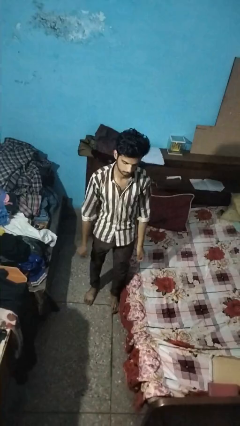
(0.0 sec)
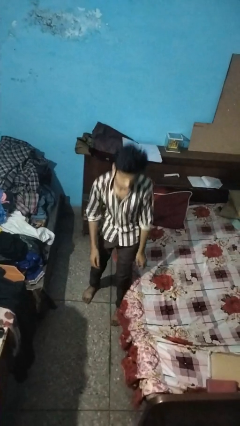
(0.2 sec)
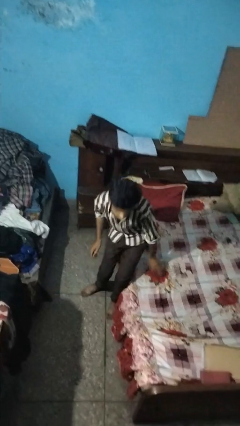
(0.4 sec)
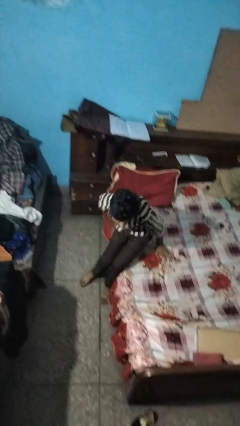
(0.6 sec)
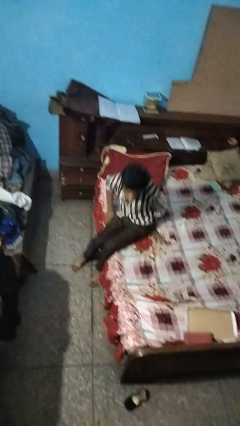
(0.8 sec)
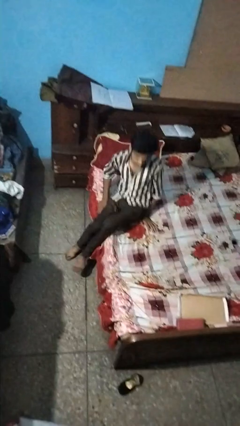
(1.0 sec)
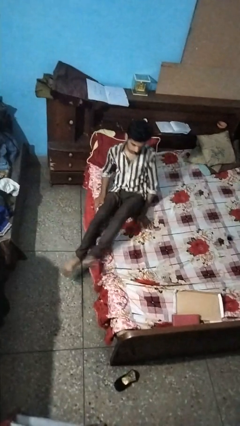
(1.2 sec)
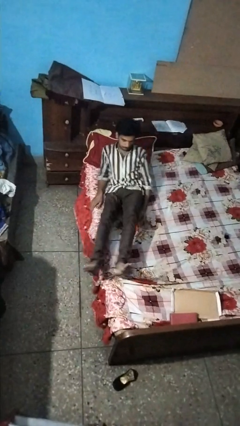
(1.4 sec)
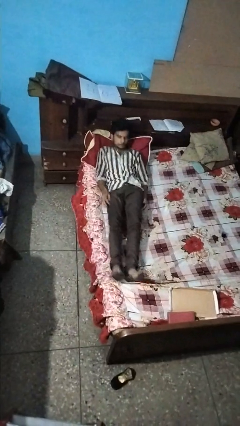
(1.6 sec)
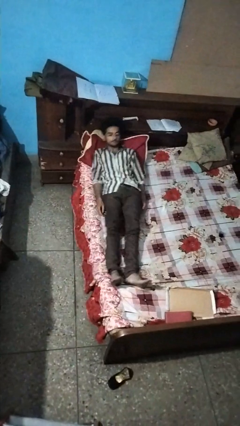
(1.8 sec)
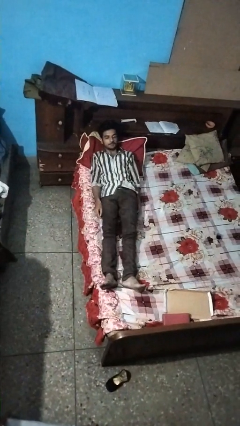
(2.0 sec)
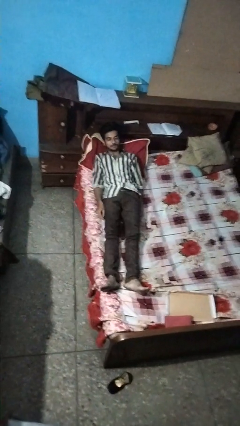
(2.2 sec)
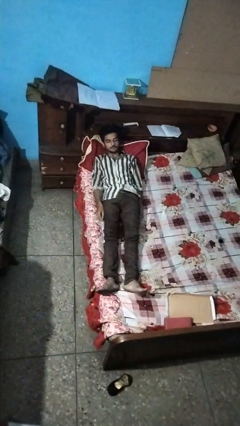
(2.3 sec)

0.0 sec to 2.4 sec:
person lies down on bed

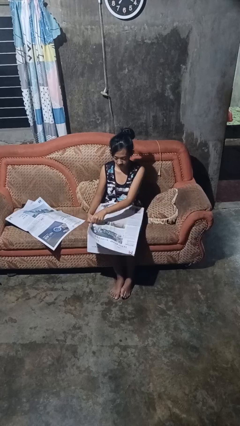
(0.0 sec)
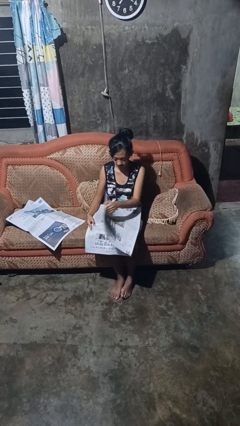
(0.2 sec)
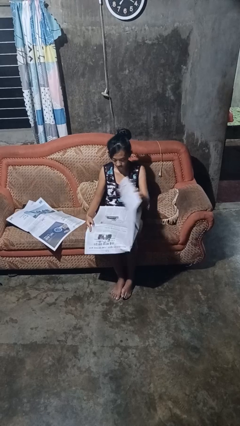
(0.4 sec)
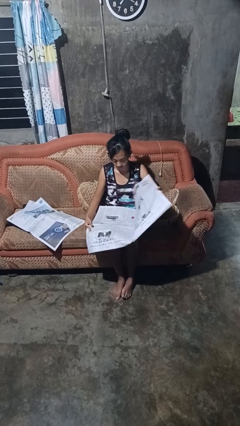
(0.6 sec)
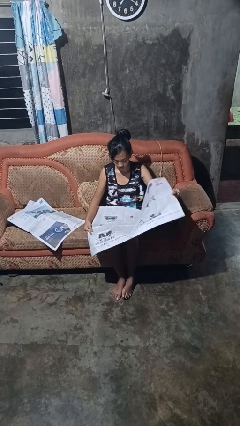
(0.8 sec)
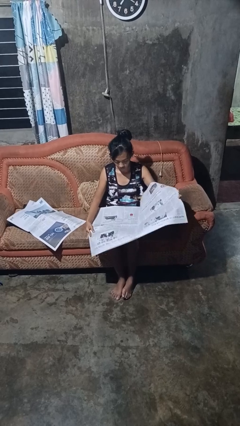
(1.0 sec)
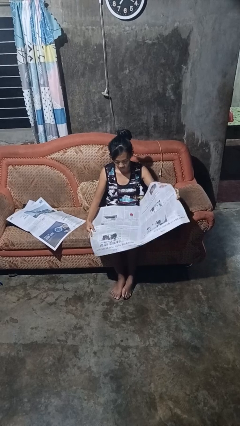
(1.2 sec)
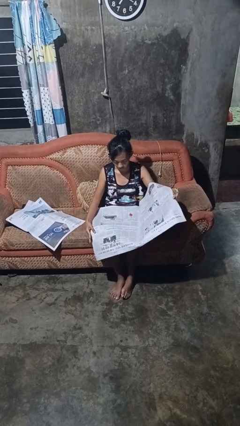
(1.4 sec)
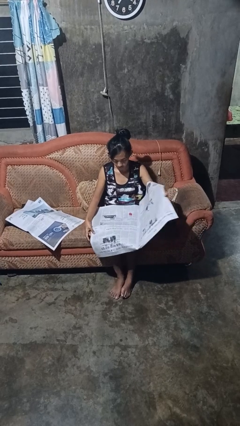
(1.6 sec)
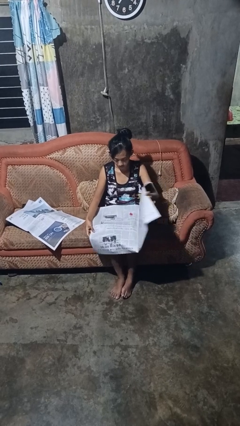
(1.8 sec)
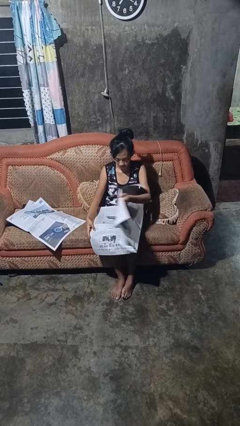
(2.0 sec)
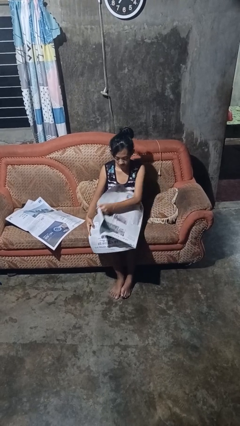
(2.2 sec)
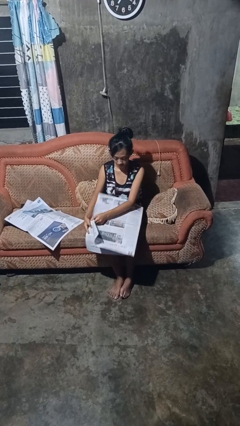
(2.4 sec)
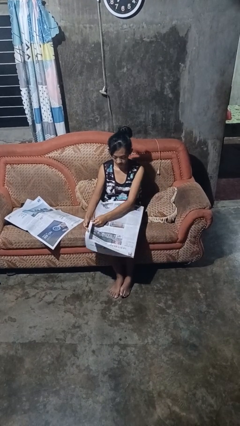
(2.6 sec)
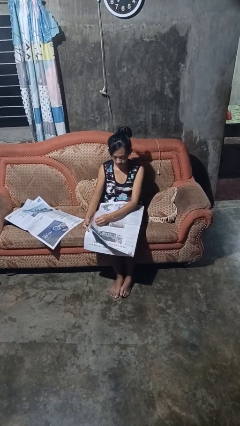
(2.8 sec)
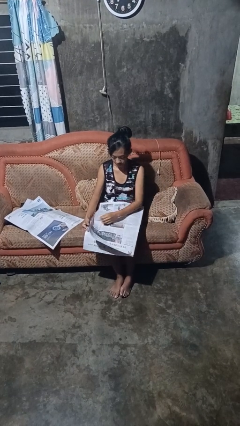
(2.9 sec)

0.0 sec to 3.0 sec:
person reads newspaper

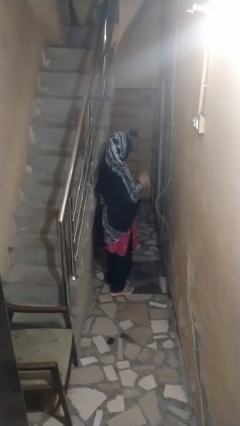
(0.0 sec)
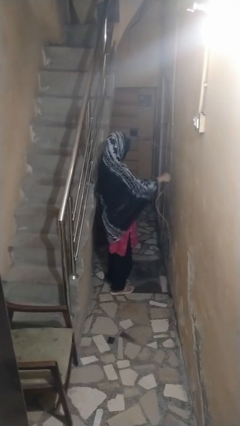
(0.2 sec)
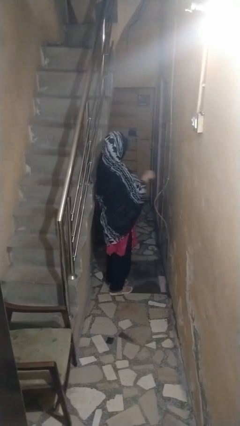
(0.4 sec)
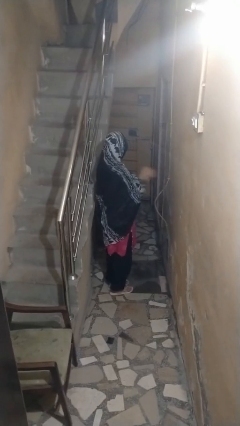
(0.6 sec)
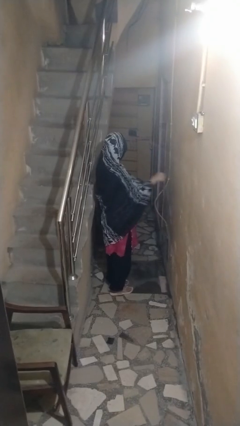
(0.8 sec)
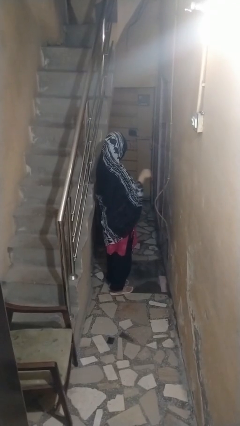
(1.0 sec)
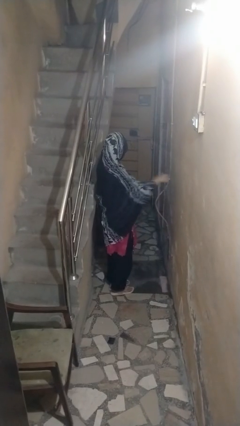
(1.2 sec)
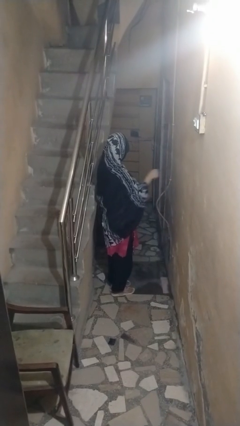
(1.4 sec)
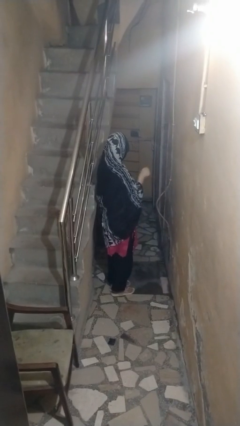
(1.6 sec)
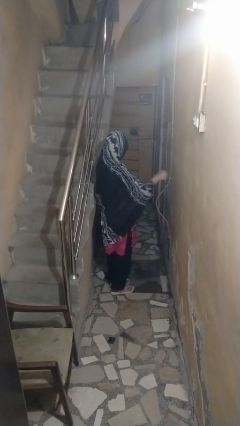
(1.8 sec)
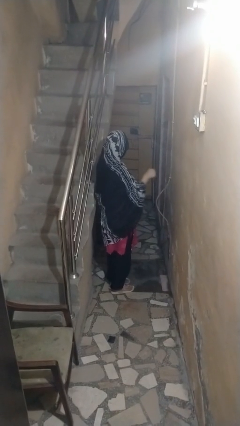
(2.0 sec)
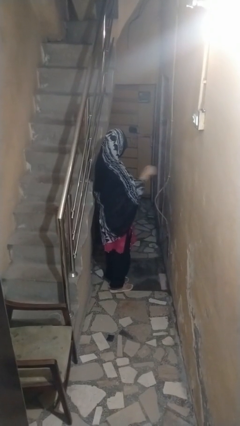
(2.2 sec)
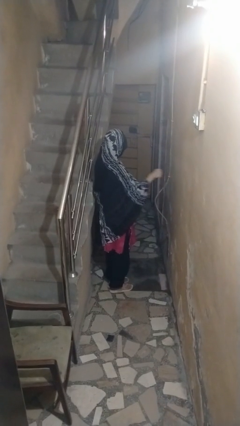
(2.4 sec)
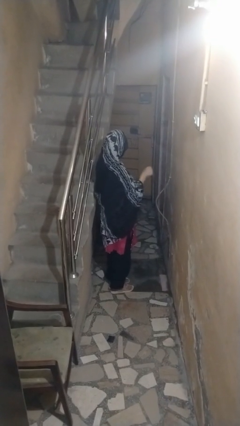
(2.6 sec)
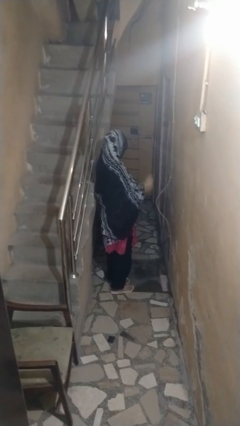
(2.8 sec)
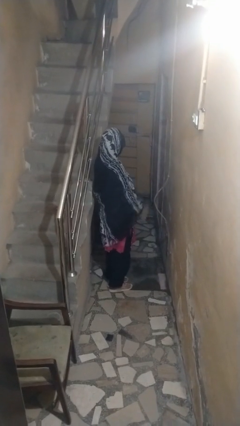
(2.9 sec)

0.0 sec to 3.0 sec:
person punches

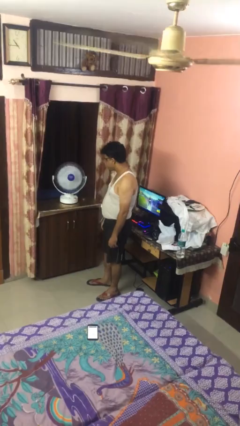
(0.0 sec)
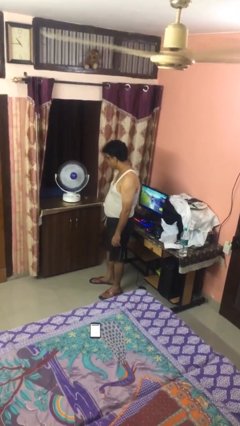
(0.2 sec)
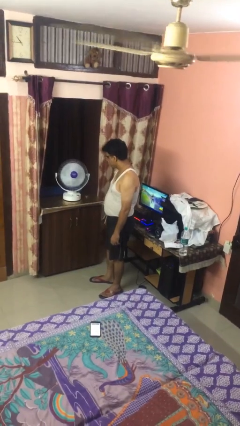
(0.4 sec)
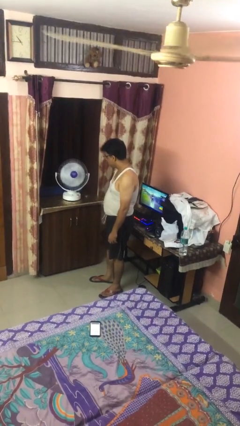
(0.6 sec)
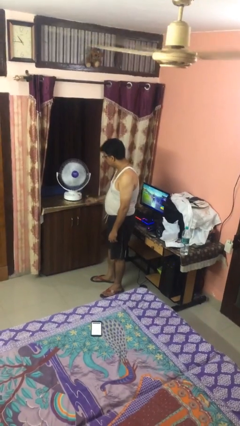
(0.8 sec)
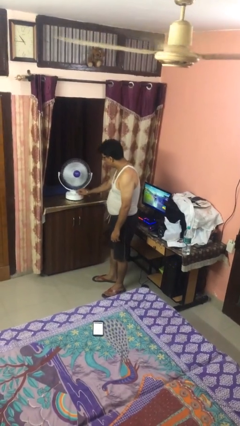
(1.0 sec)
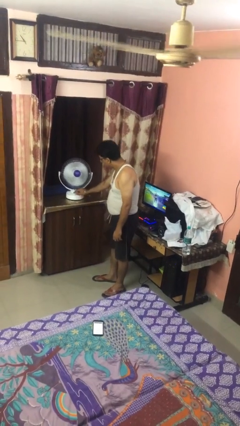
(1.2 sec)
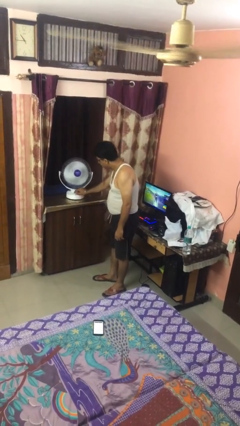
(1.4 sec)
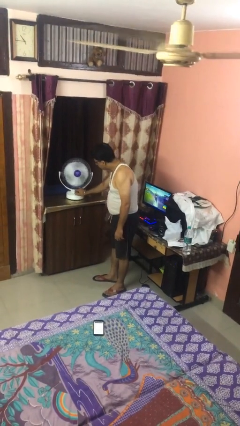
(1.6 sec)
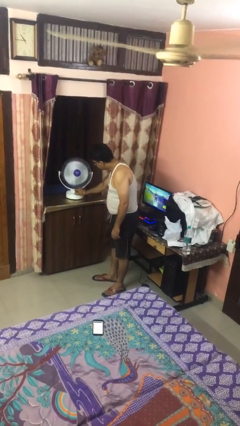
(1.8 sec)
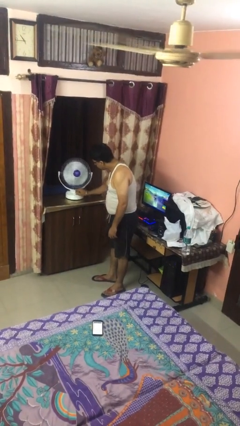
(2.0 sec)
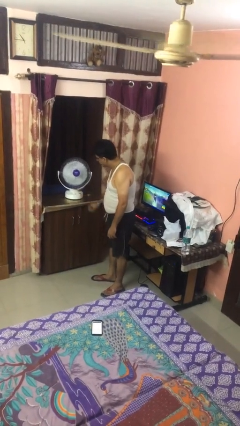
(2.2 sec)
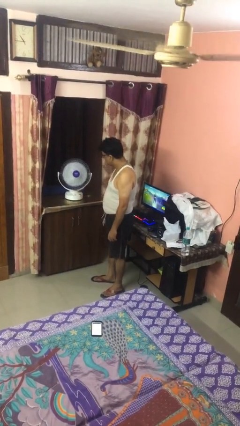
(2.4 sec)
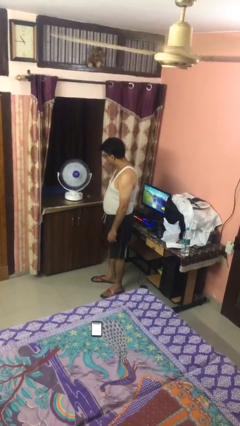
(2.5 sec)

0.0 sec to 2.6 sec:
person turns on fan

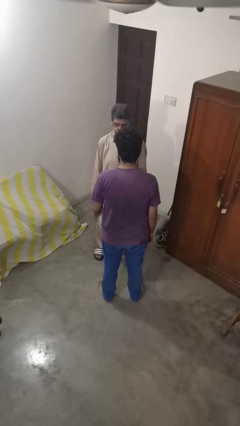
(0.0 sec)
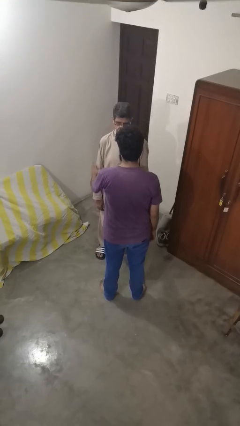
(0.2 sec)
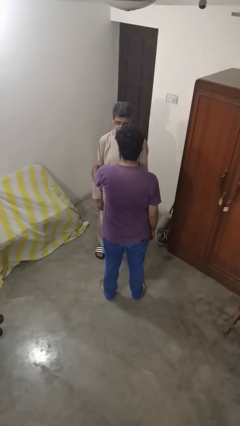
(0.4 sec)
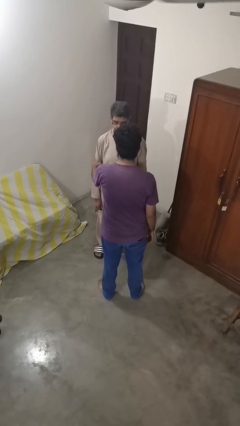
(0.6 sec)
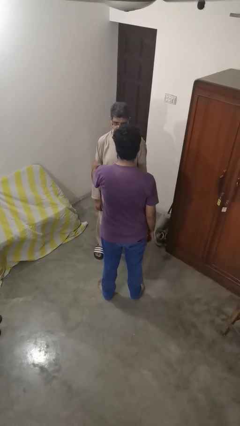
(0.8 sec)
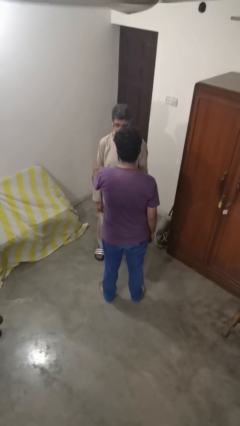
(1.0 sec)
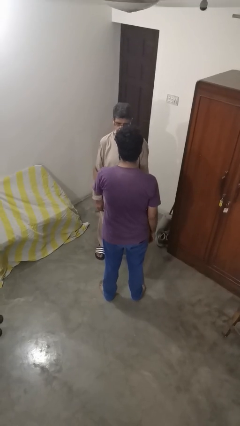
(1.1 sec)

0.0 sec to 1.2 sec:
person grabs person by bicep

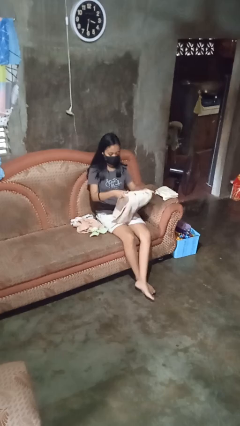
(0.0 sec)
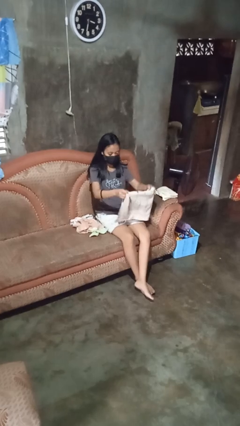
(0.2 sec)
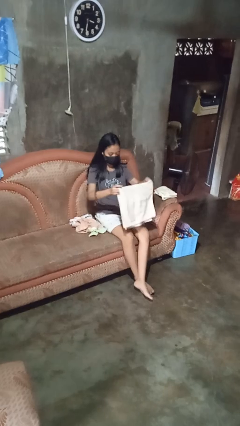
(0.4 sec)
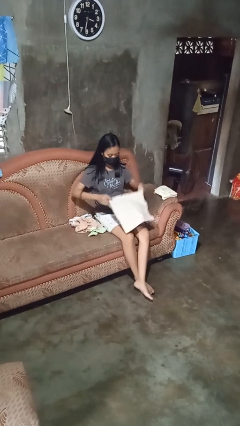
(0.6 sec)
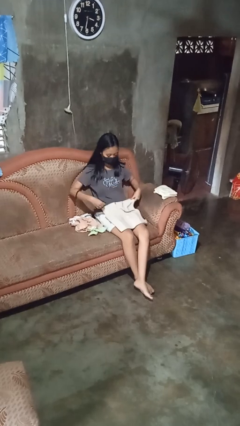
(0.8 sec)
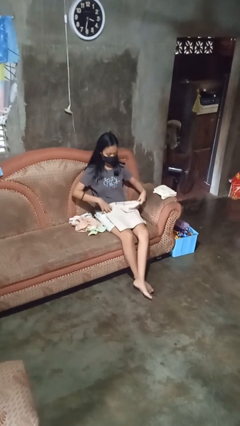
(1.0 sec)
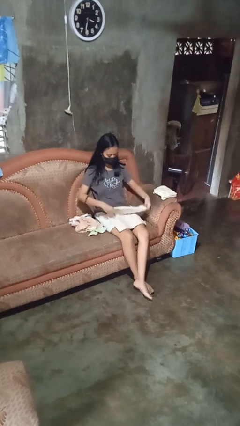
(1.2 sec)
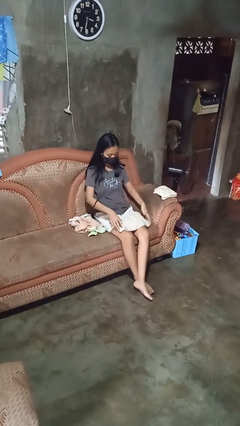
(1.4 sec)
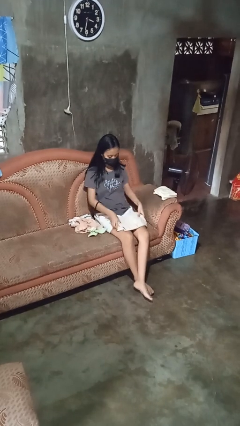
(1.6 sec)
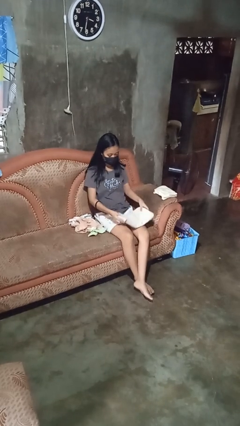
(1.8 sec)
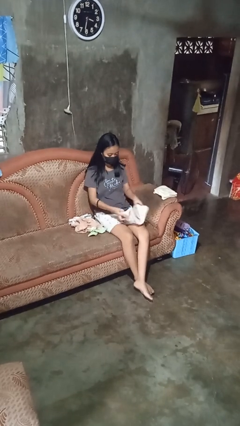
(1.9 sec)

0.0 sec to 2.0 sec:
person folds towel

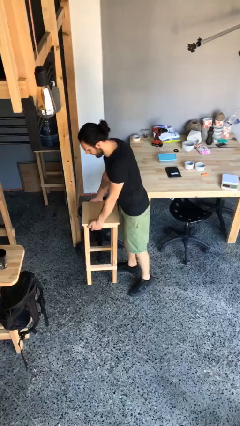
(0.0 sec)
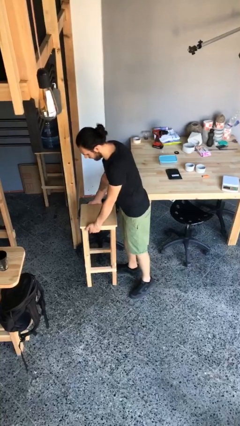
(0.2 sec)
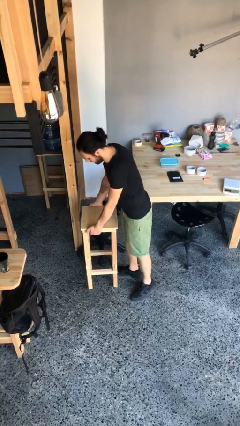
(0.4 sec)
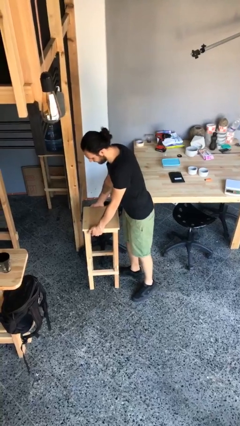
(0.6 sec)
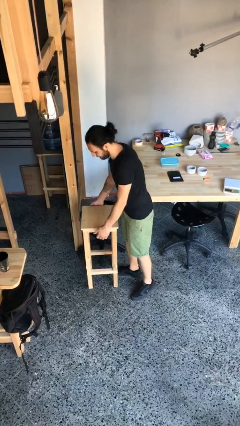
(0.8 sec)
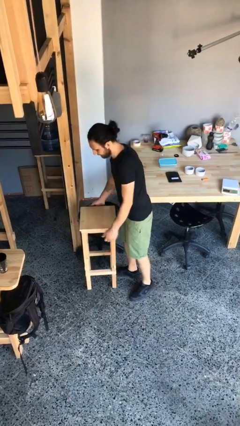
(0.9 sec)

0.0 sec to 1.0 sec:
person puts down object on floor

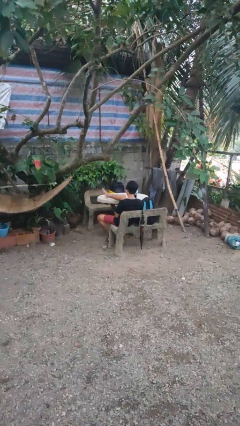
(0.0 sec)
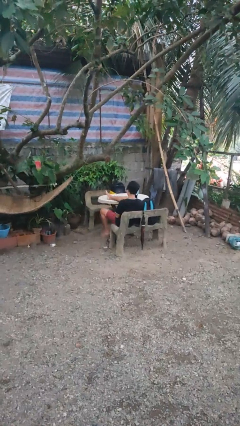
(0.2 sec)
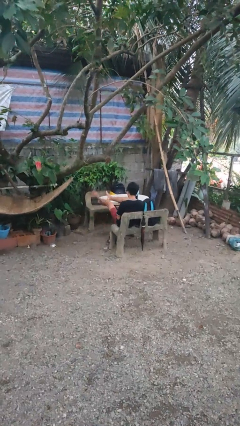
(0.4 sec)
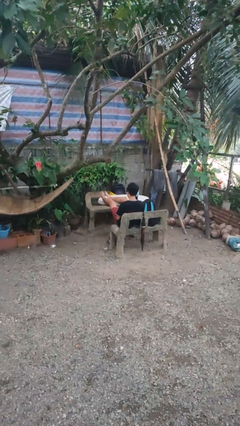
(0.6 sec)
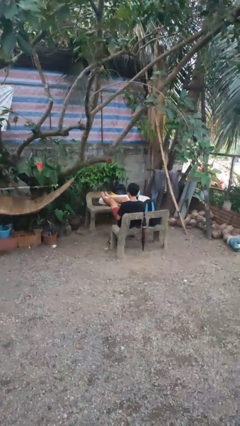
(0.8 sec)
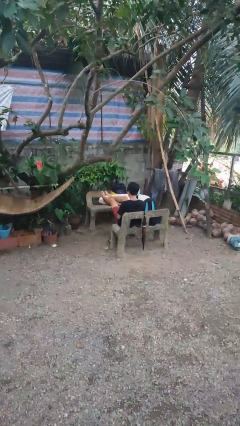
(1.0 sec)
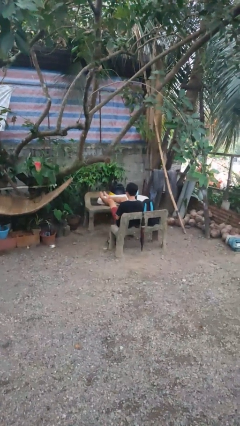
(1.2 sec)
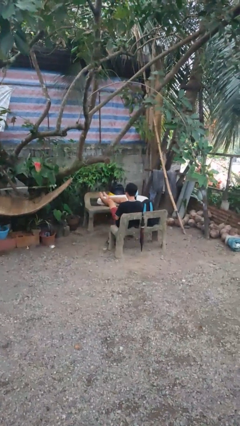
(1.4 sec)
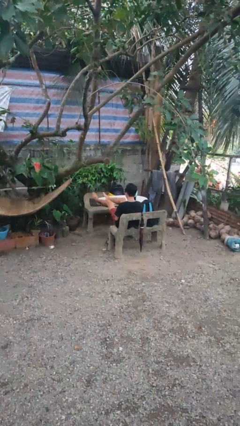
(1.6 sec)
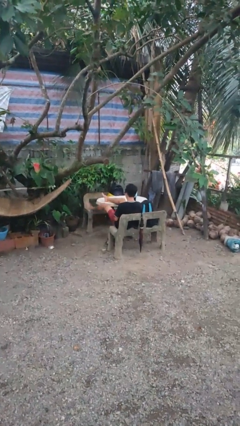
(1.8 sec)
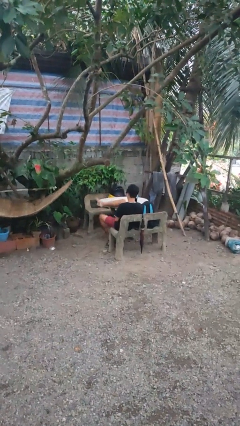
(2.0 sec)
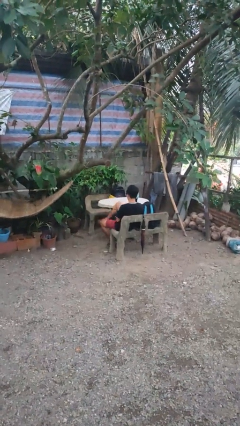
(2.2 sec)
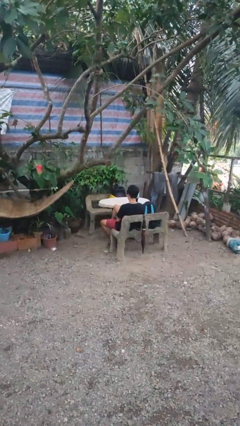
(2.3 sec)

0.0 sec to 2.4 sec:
person puts feet up
